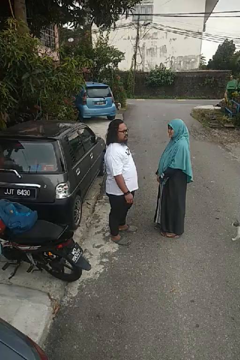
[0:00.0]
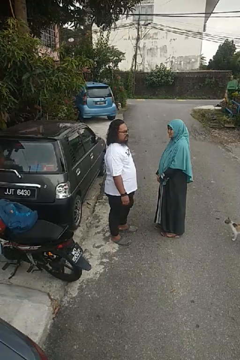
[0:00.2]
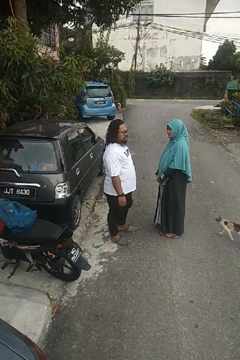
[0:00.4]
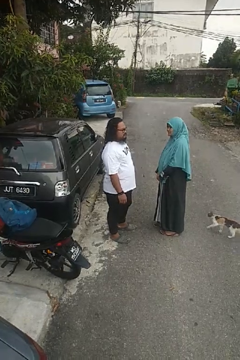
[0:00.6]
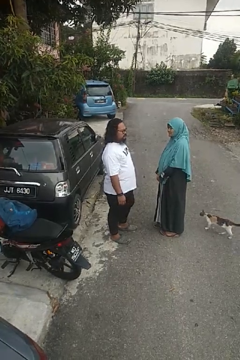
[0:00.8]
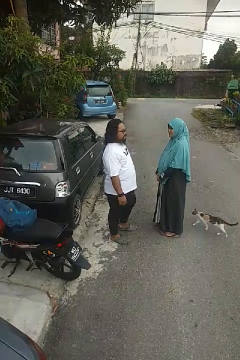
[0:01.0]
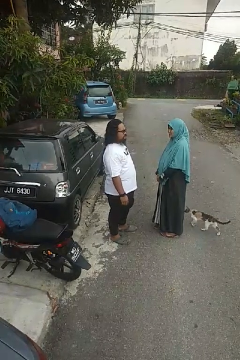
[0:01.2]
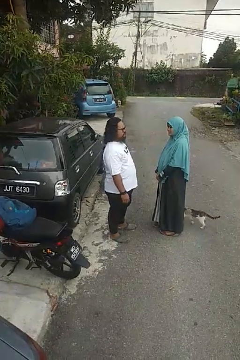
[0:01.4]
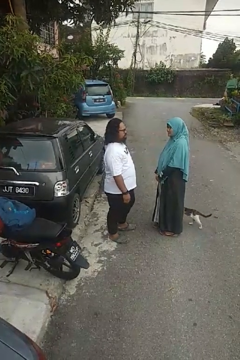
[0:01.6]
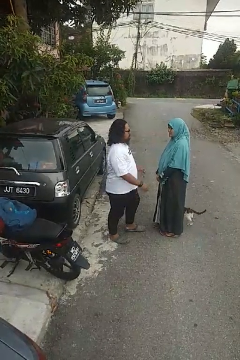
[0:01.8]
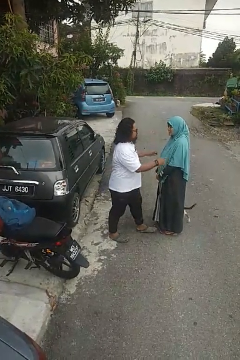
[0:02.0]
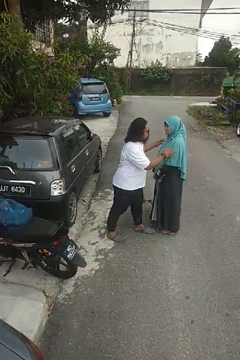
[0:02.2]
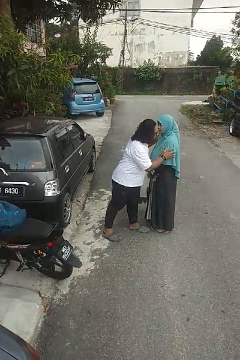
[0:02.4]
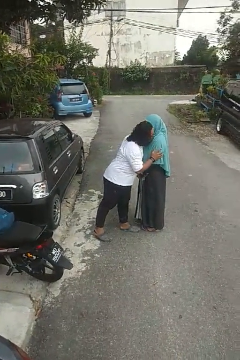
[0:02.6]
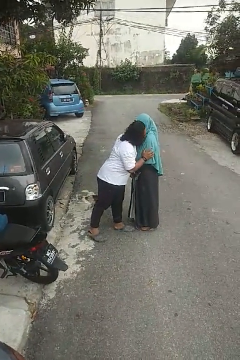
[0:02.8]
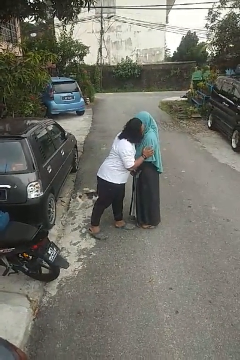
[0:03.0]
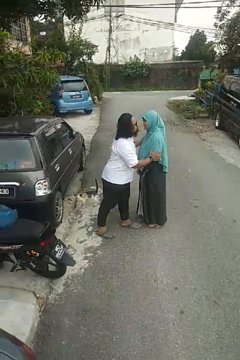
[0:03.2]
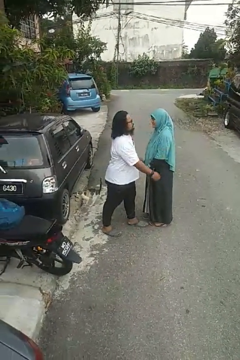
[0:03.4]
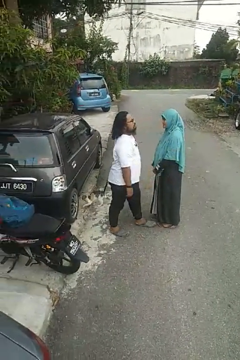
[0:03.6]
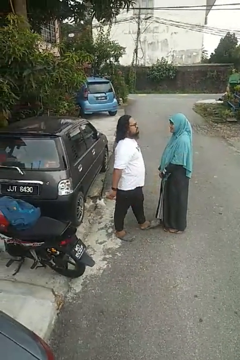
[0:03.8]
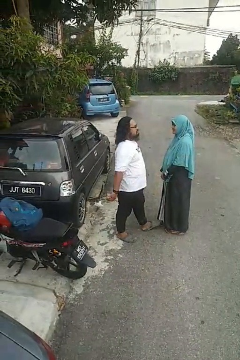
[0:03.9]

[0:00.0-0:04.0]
person kisses cheek of person

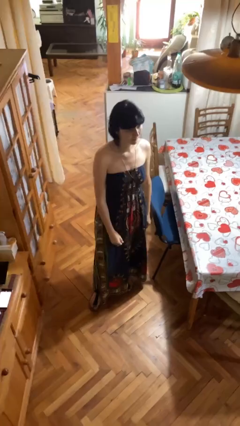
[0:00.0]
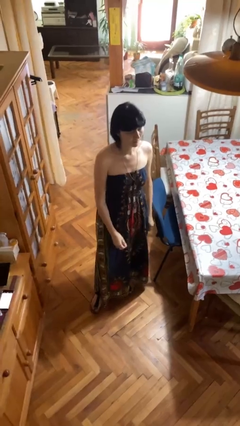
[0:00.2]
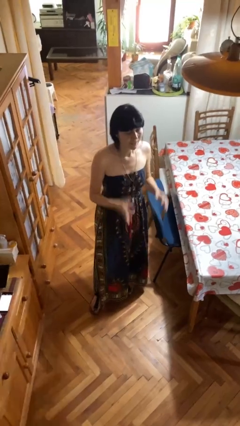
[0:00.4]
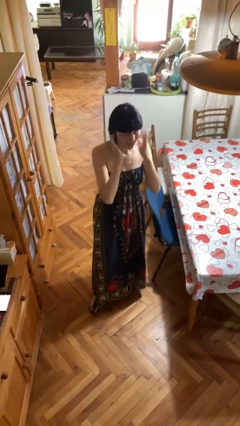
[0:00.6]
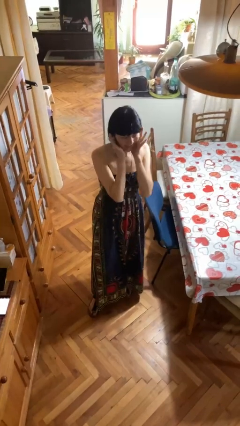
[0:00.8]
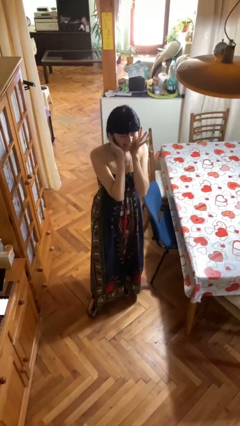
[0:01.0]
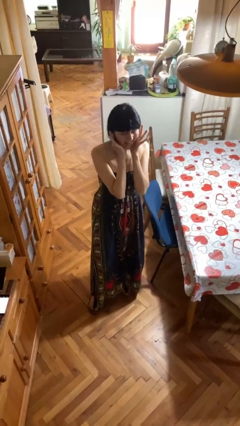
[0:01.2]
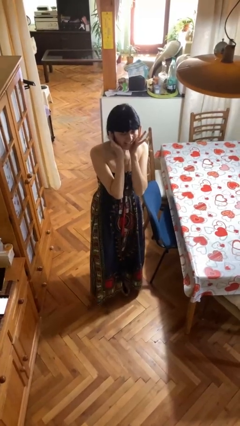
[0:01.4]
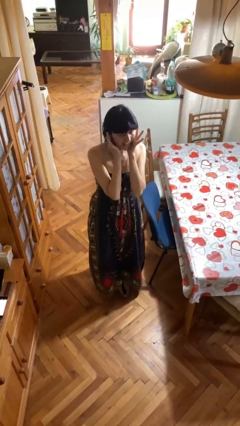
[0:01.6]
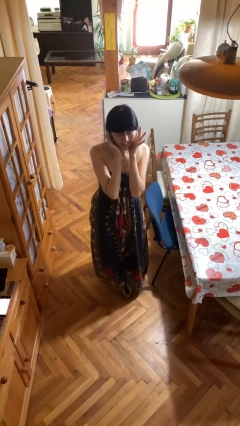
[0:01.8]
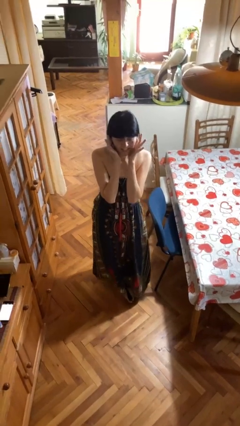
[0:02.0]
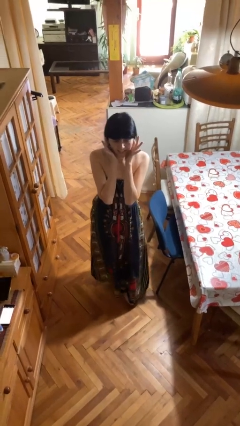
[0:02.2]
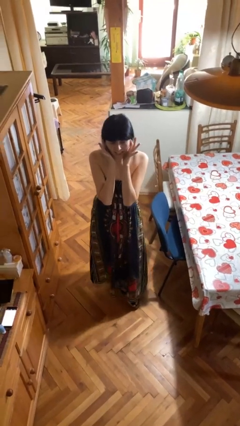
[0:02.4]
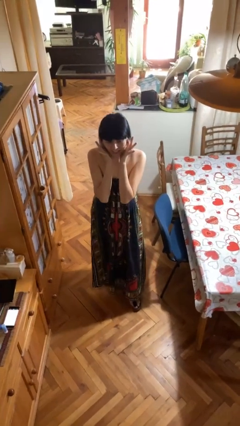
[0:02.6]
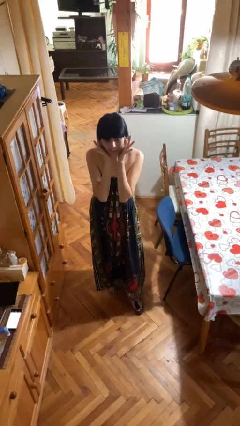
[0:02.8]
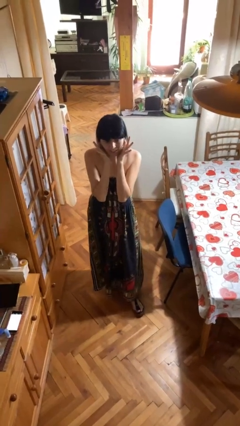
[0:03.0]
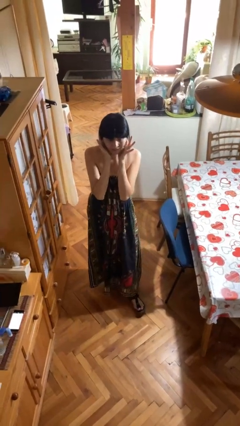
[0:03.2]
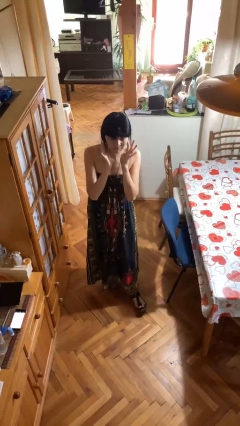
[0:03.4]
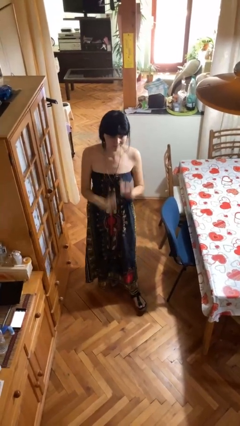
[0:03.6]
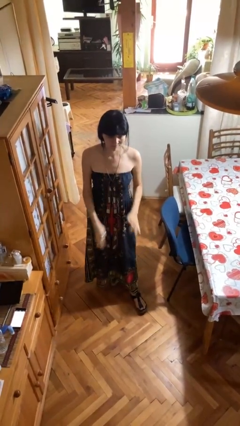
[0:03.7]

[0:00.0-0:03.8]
person puts fingers in ear

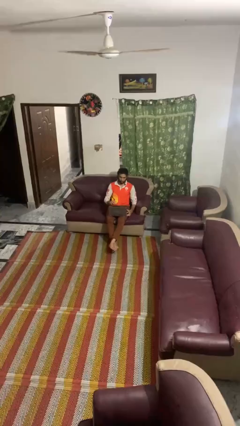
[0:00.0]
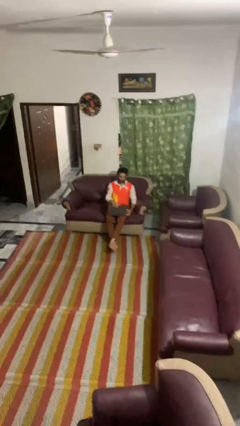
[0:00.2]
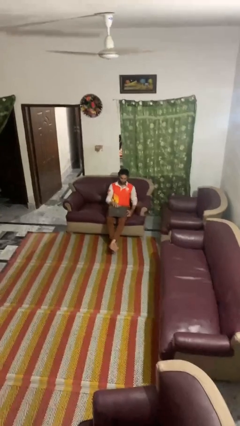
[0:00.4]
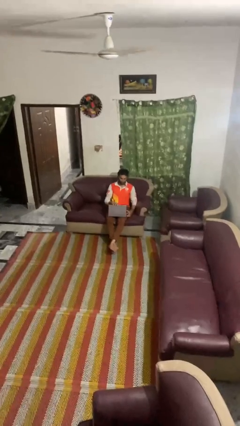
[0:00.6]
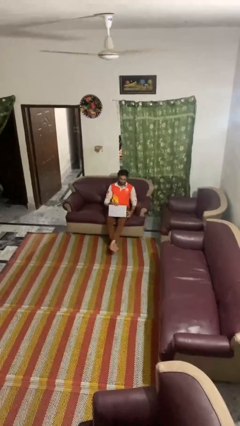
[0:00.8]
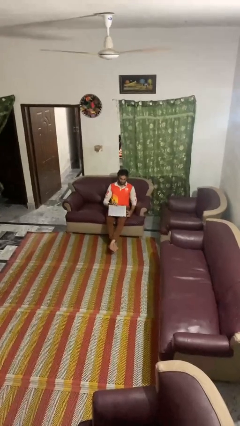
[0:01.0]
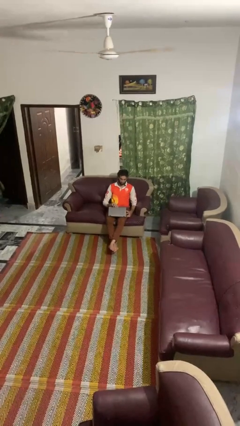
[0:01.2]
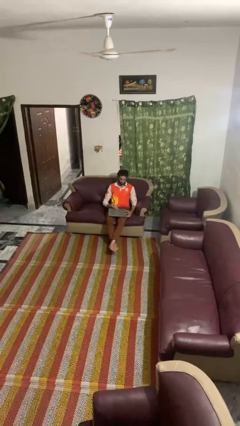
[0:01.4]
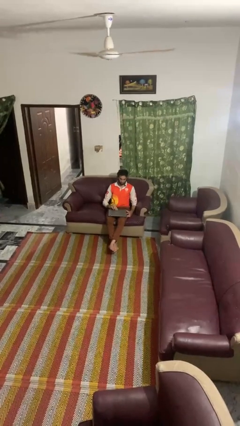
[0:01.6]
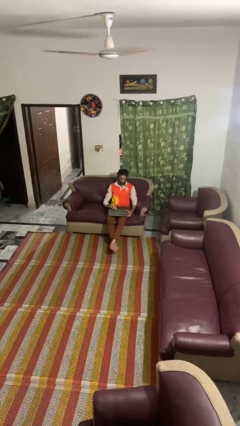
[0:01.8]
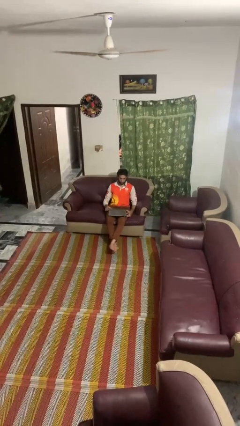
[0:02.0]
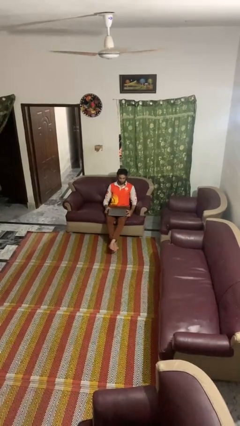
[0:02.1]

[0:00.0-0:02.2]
person closes laptop

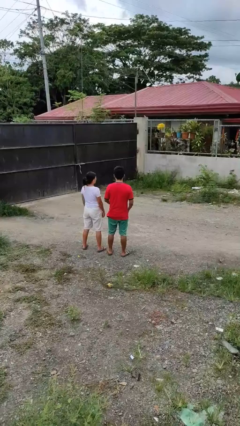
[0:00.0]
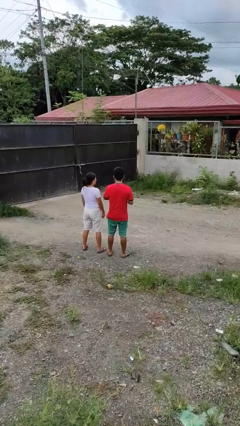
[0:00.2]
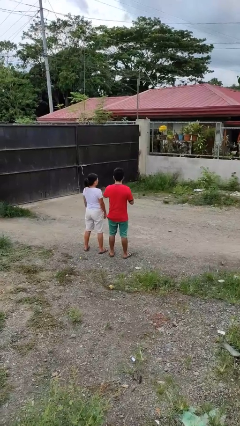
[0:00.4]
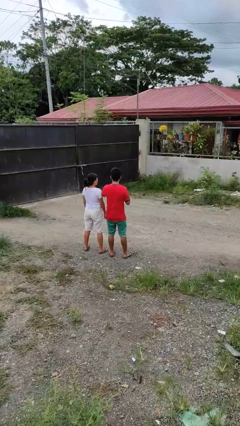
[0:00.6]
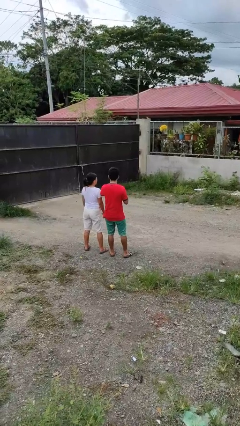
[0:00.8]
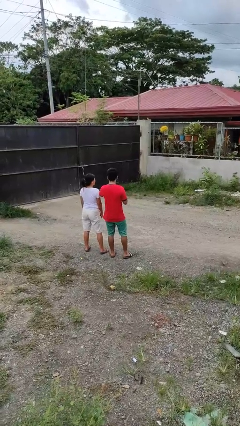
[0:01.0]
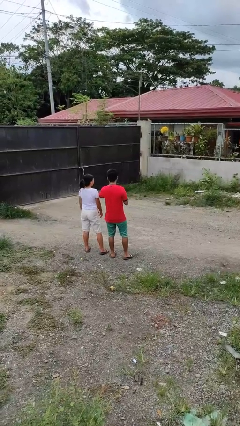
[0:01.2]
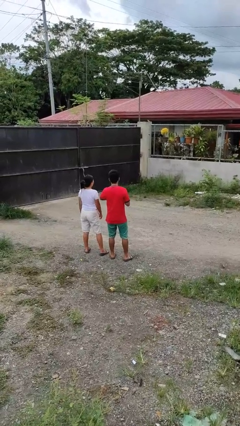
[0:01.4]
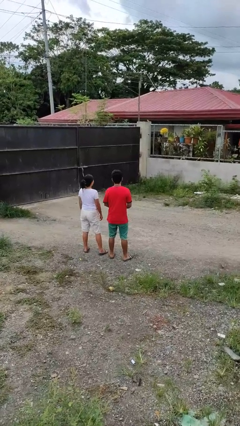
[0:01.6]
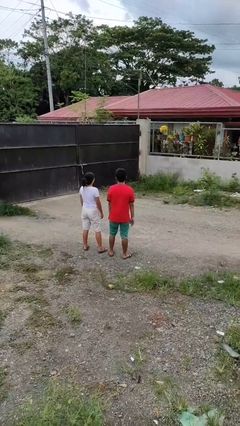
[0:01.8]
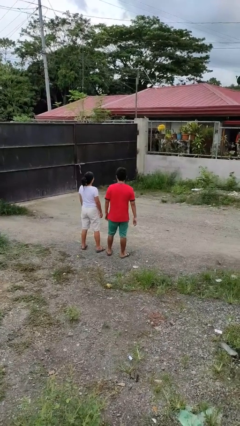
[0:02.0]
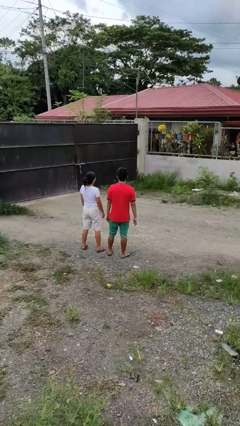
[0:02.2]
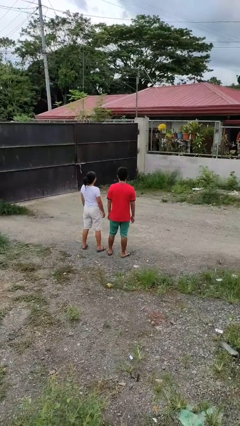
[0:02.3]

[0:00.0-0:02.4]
person nudges person with elbow

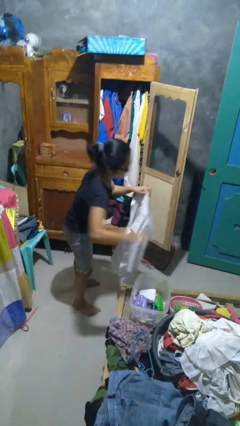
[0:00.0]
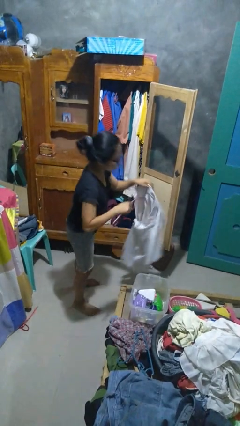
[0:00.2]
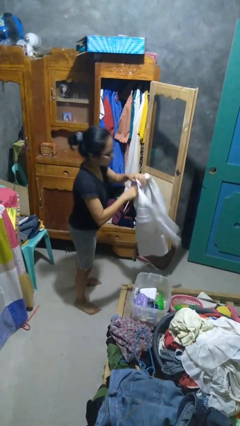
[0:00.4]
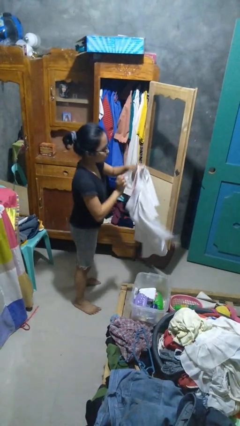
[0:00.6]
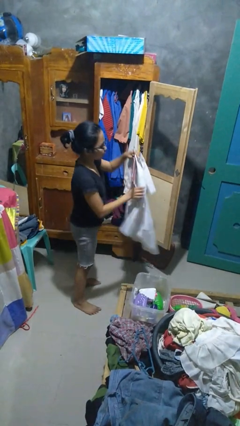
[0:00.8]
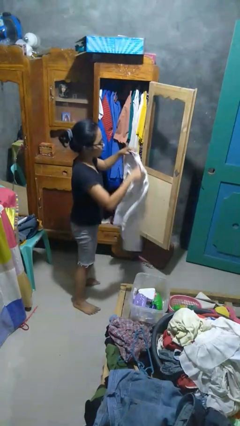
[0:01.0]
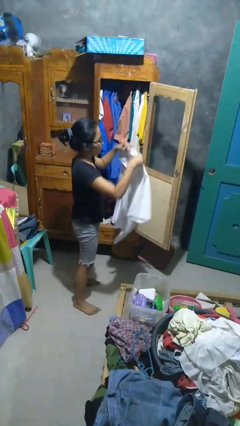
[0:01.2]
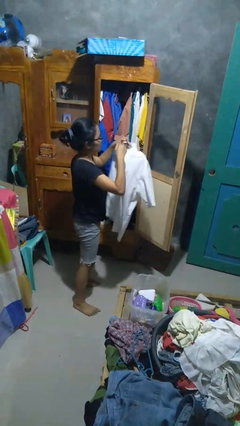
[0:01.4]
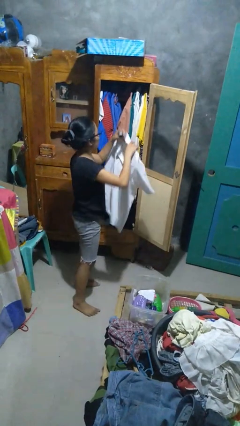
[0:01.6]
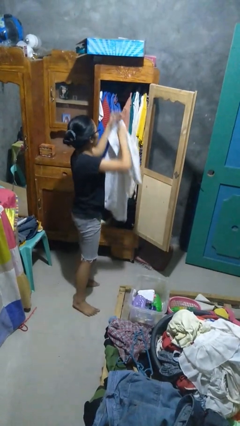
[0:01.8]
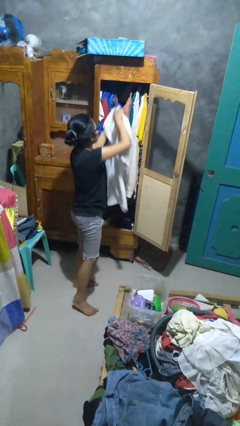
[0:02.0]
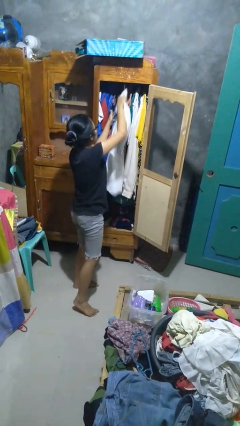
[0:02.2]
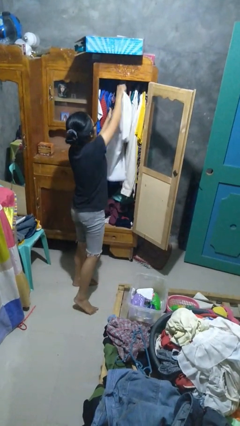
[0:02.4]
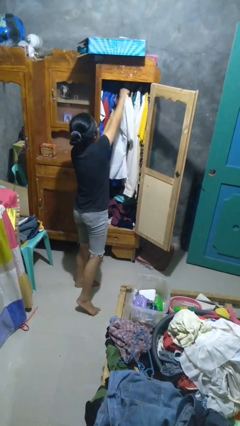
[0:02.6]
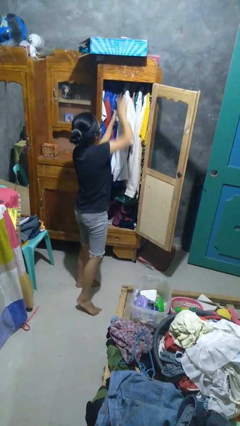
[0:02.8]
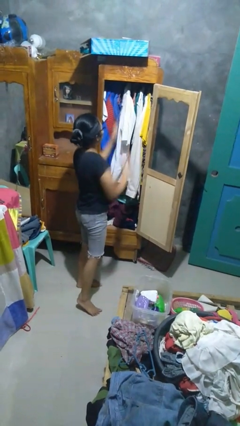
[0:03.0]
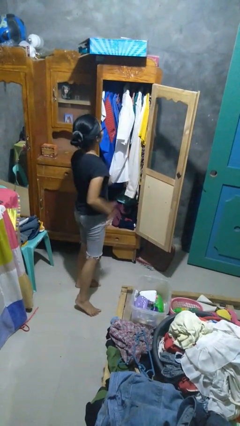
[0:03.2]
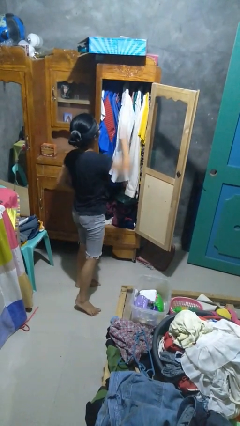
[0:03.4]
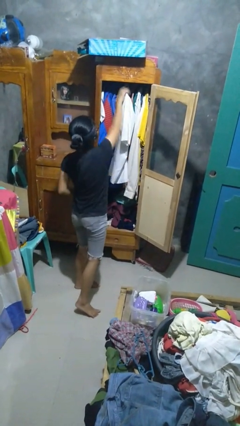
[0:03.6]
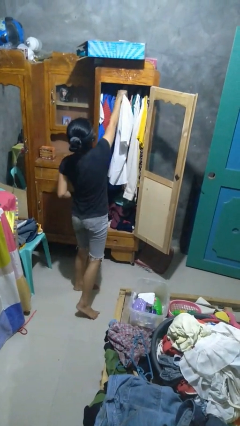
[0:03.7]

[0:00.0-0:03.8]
person puts clothes into closet

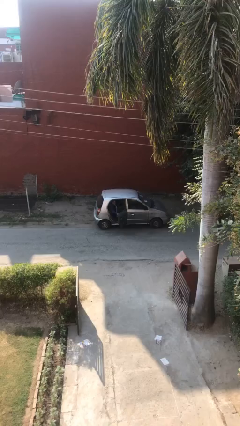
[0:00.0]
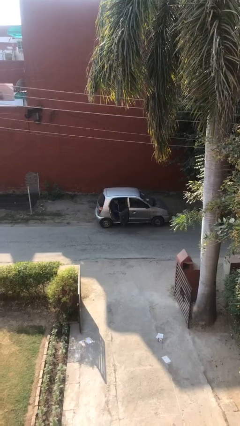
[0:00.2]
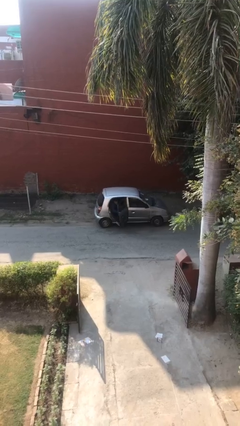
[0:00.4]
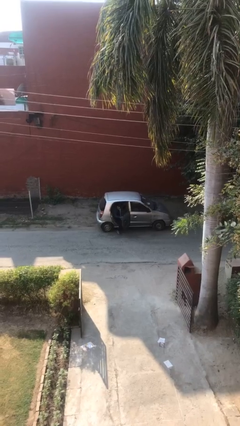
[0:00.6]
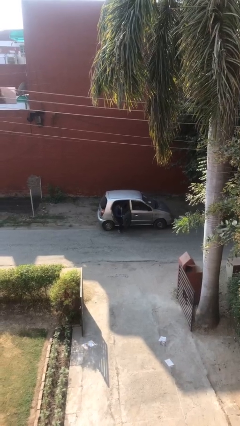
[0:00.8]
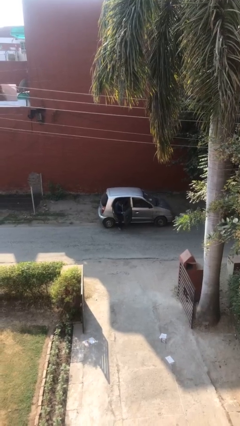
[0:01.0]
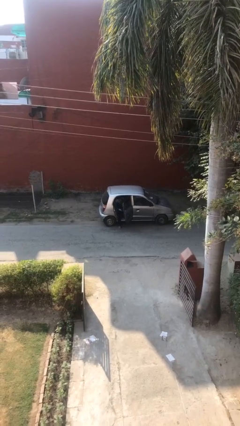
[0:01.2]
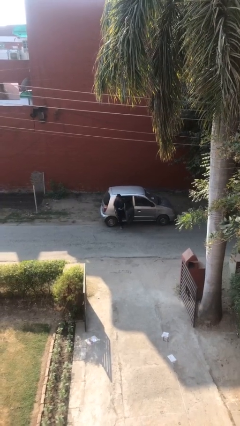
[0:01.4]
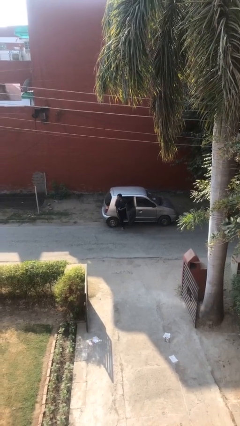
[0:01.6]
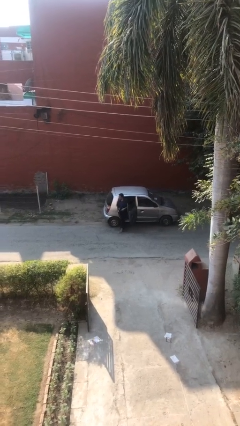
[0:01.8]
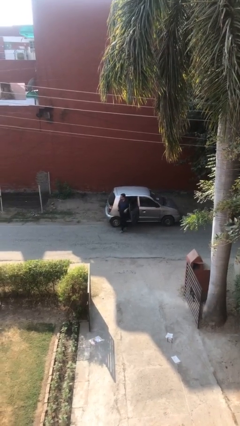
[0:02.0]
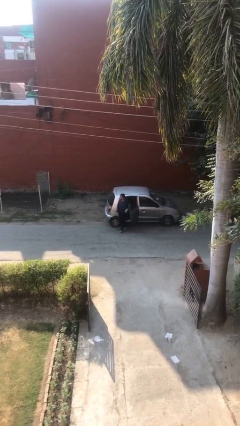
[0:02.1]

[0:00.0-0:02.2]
person exits car
